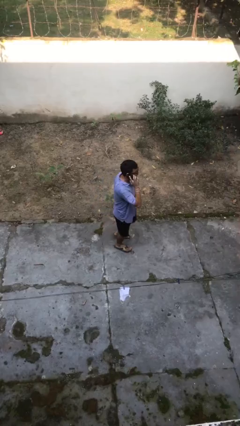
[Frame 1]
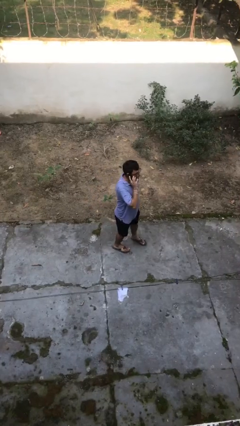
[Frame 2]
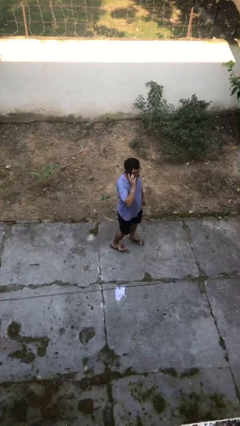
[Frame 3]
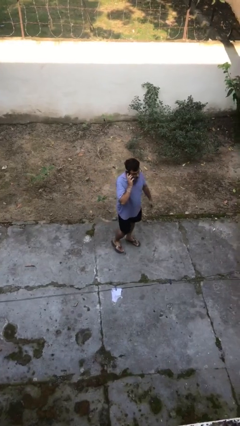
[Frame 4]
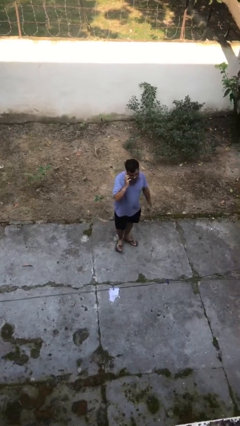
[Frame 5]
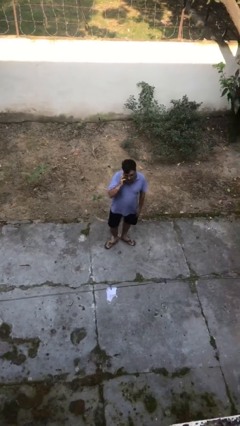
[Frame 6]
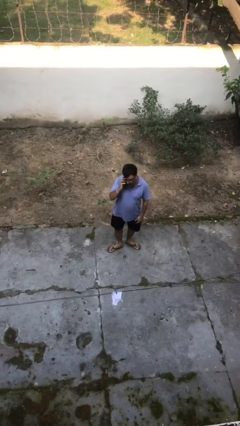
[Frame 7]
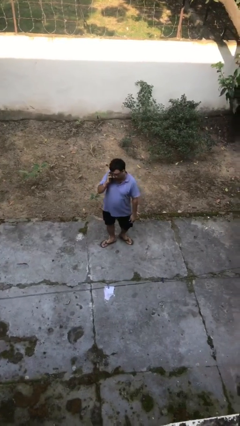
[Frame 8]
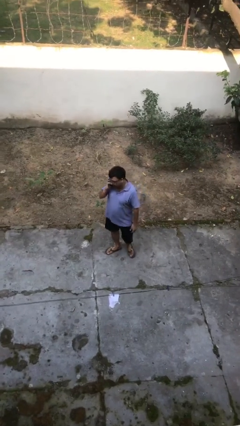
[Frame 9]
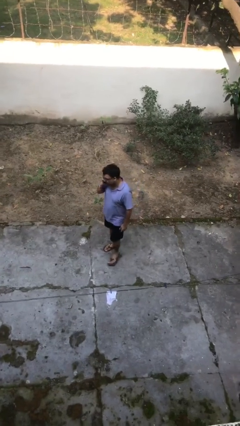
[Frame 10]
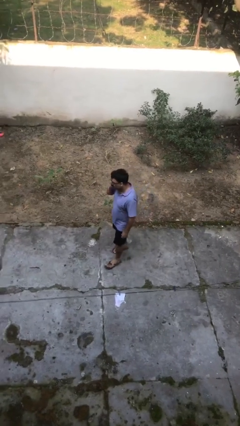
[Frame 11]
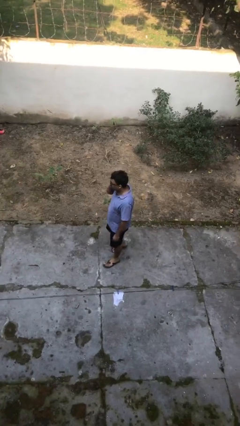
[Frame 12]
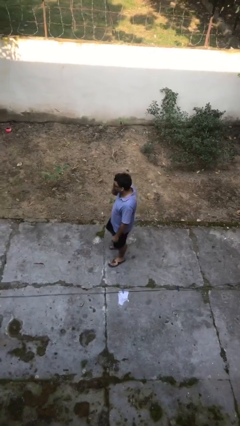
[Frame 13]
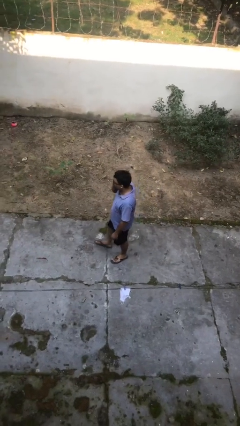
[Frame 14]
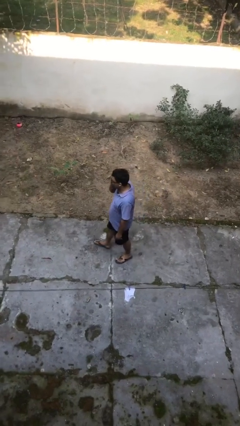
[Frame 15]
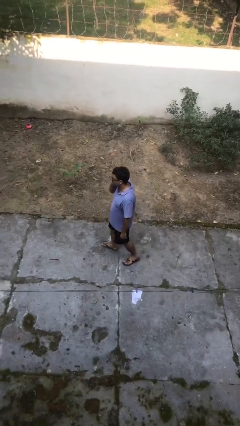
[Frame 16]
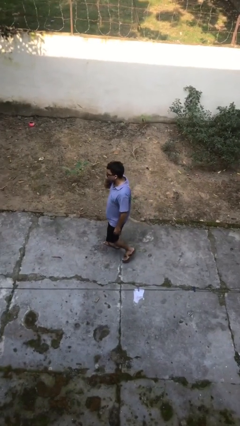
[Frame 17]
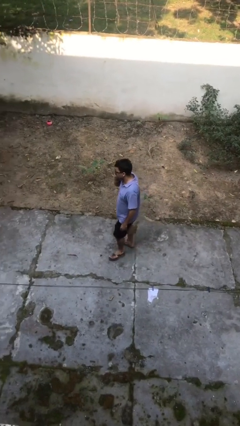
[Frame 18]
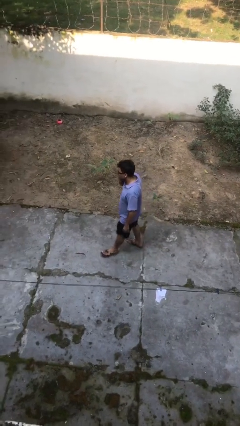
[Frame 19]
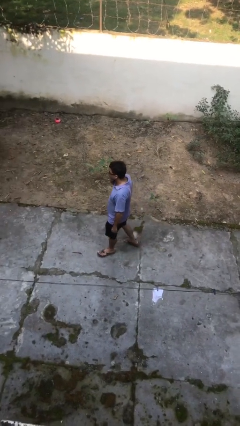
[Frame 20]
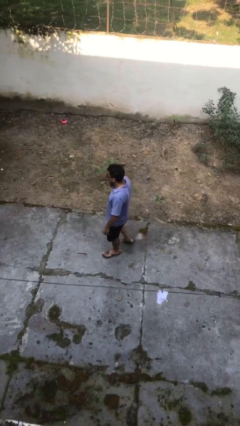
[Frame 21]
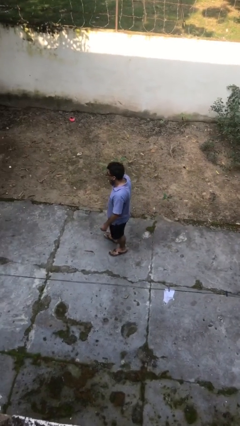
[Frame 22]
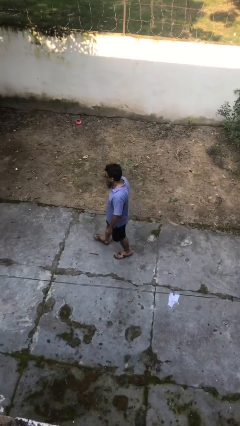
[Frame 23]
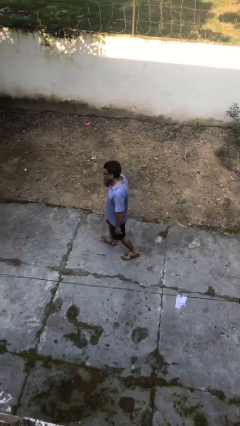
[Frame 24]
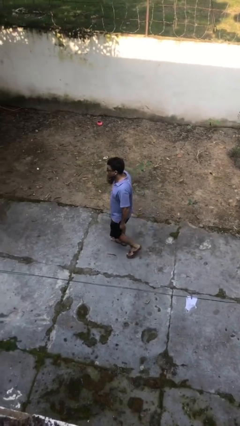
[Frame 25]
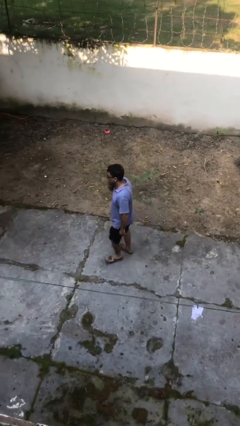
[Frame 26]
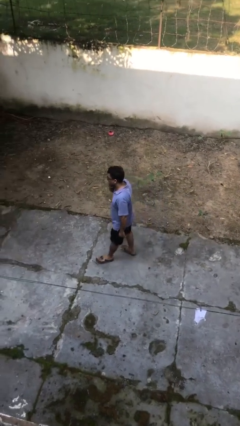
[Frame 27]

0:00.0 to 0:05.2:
person talks on phone

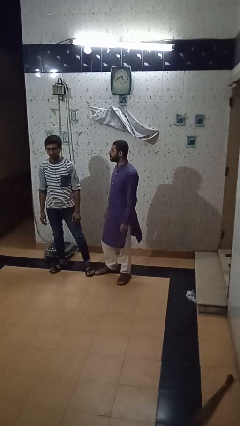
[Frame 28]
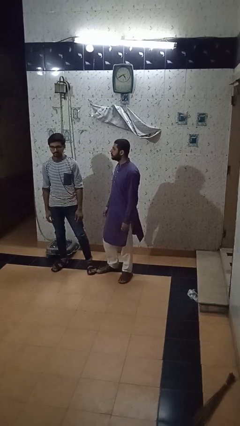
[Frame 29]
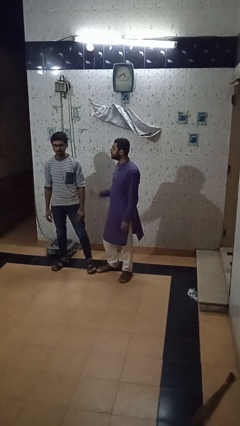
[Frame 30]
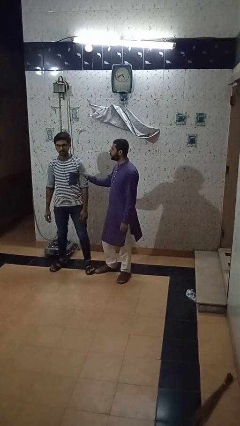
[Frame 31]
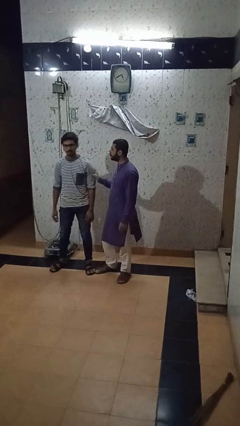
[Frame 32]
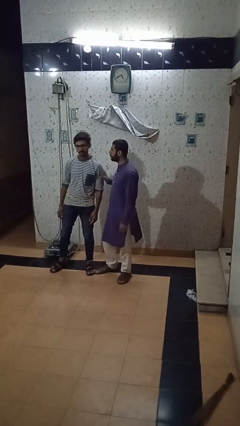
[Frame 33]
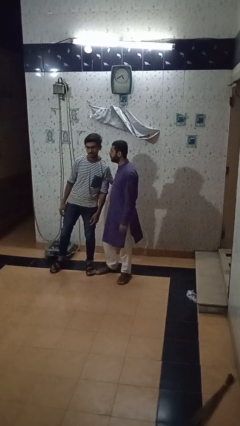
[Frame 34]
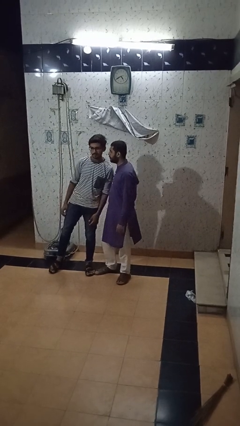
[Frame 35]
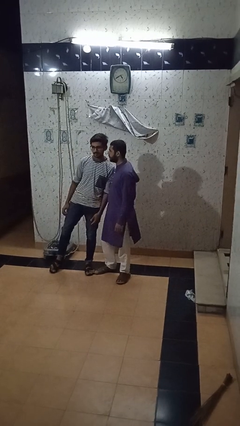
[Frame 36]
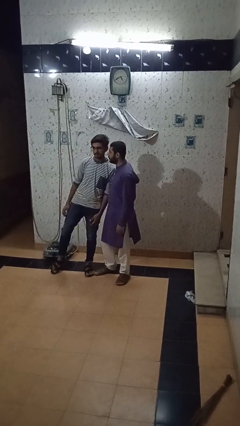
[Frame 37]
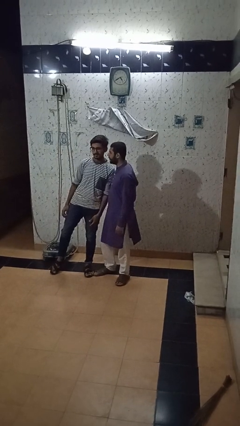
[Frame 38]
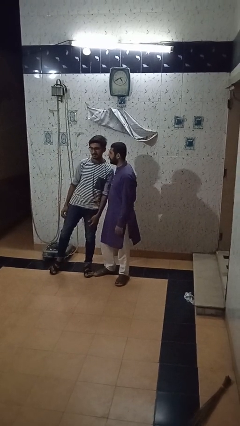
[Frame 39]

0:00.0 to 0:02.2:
person grabs person by bicep

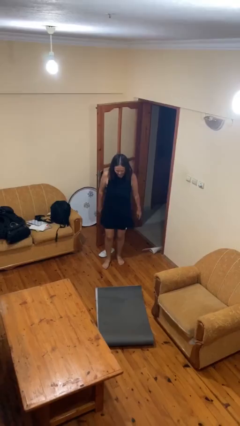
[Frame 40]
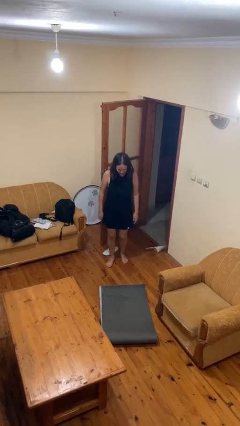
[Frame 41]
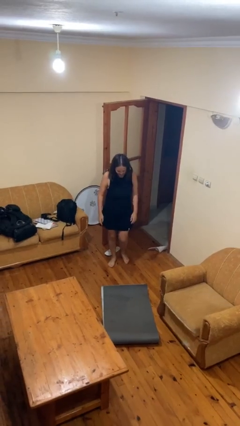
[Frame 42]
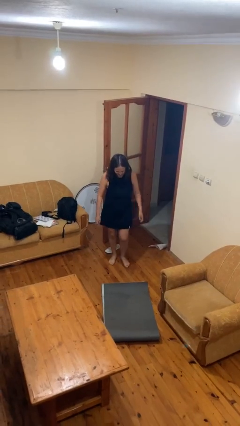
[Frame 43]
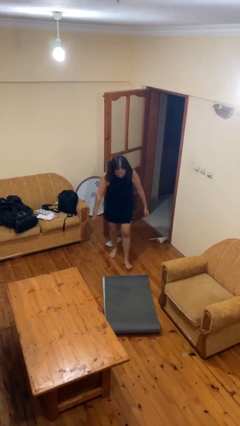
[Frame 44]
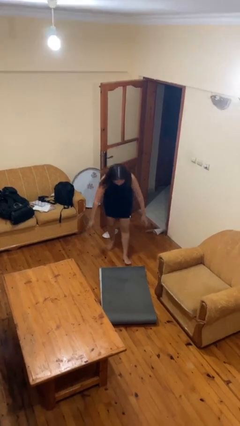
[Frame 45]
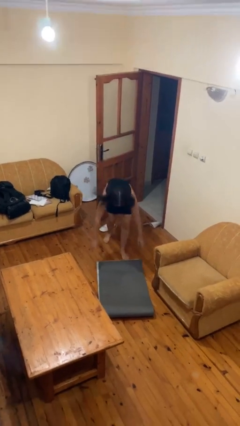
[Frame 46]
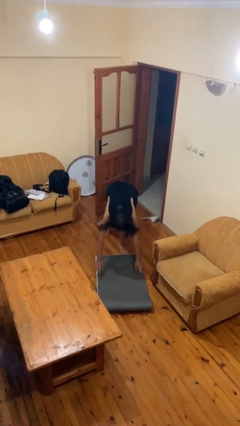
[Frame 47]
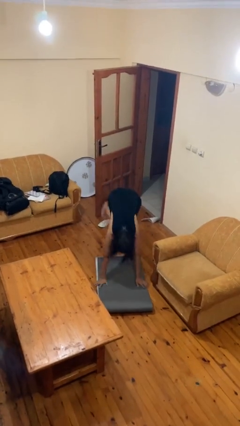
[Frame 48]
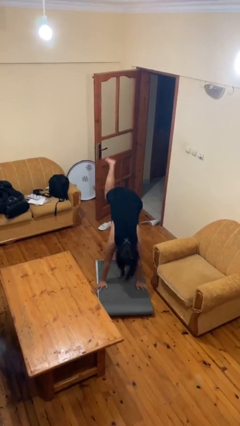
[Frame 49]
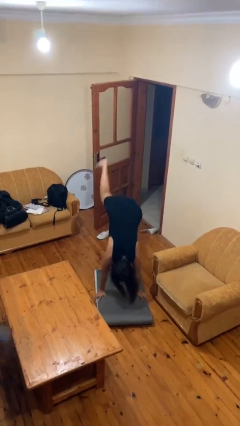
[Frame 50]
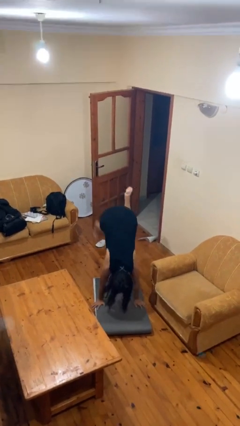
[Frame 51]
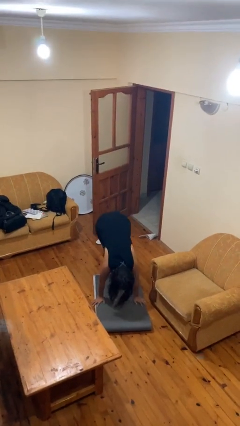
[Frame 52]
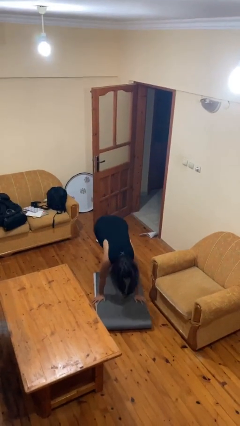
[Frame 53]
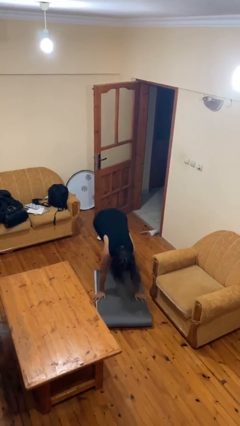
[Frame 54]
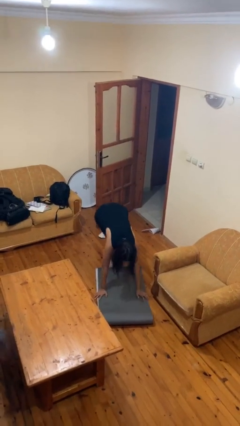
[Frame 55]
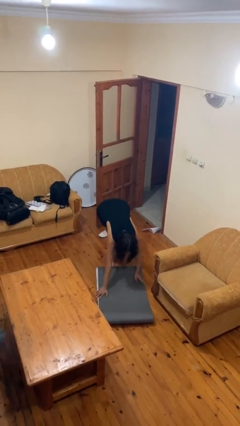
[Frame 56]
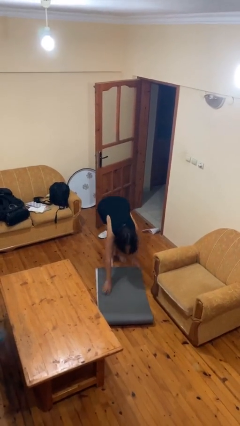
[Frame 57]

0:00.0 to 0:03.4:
person handstand

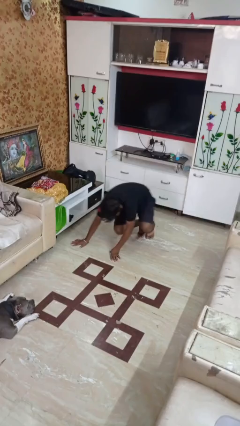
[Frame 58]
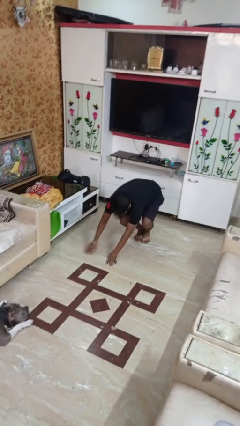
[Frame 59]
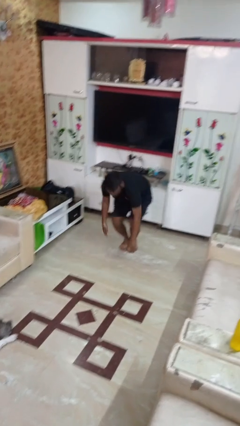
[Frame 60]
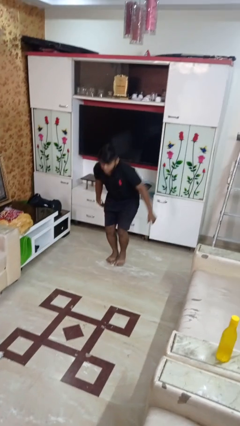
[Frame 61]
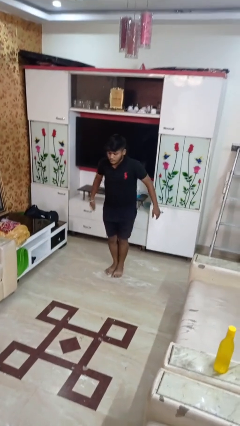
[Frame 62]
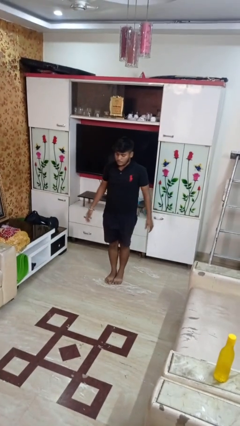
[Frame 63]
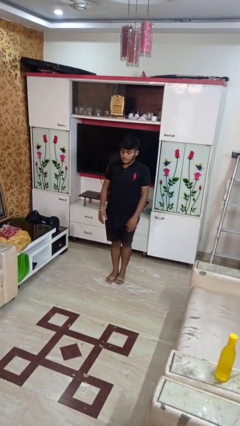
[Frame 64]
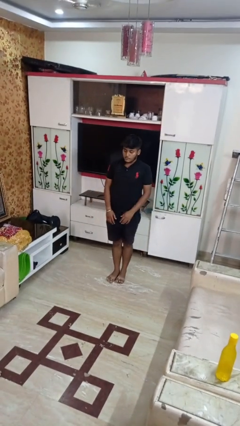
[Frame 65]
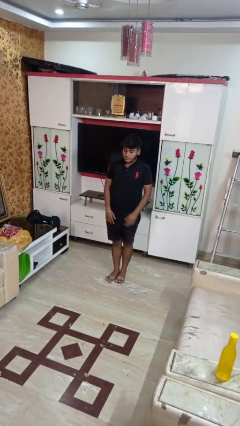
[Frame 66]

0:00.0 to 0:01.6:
person stands up from floor

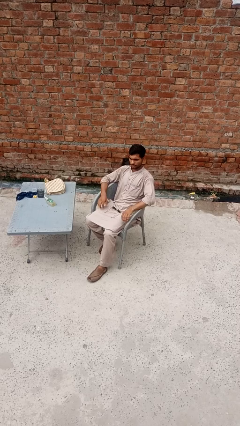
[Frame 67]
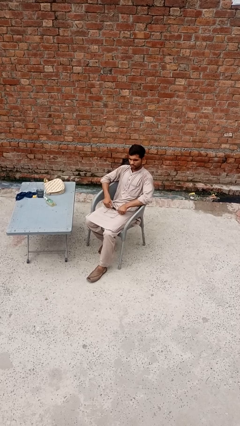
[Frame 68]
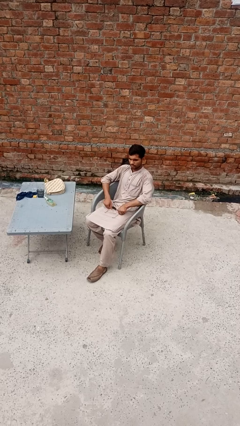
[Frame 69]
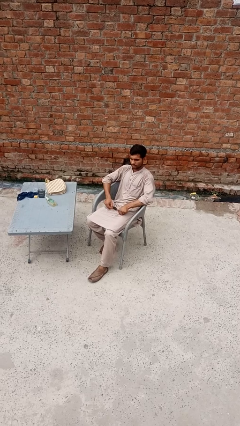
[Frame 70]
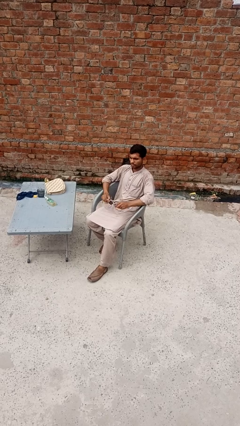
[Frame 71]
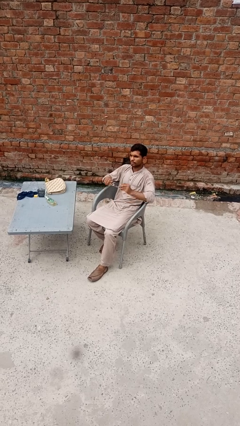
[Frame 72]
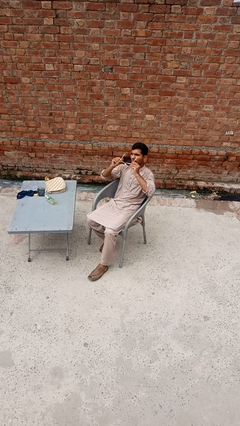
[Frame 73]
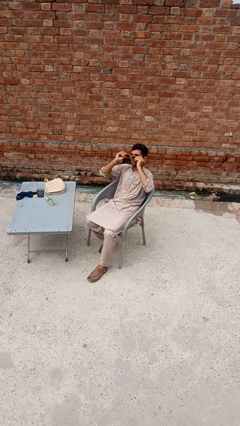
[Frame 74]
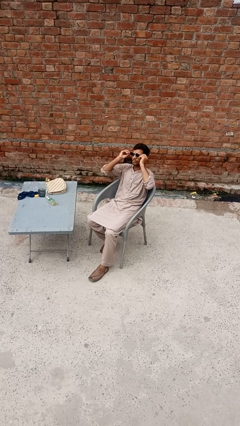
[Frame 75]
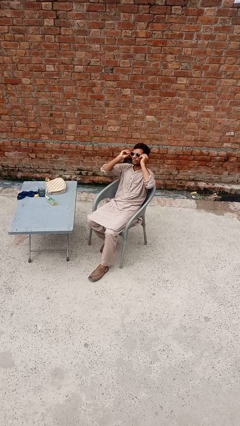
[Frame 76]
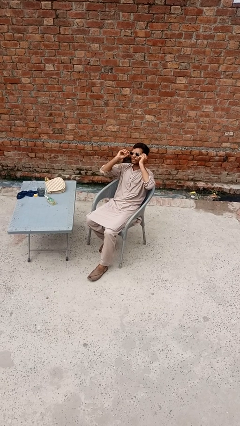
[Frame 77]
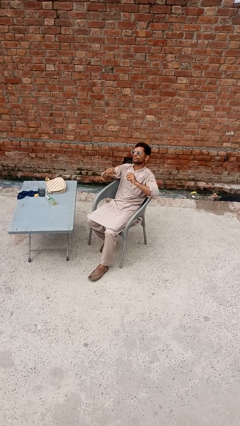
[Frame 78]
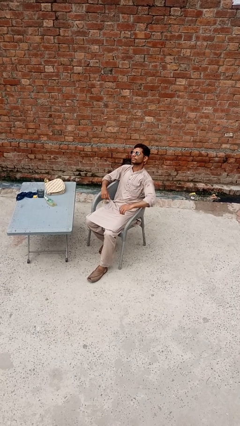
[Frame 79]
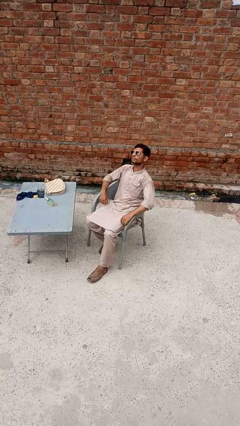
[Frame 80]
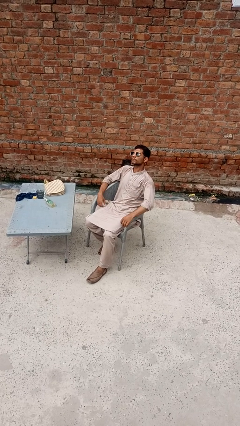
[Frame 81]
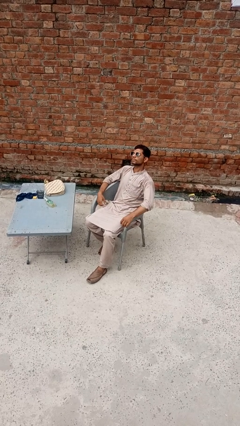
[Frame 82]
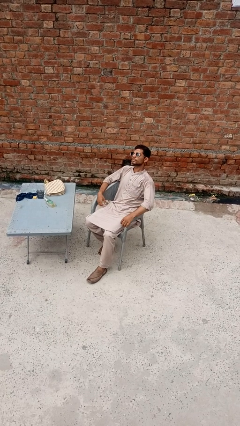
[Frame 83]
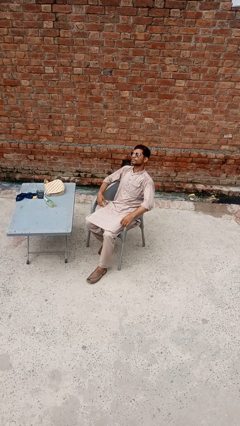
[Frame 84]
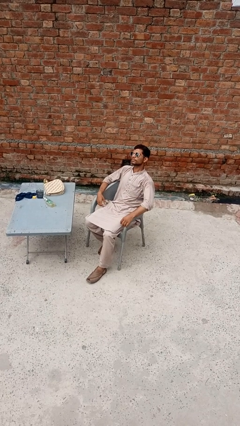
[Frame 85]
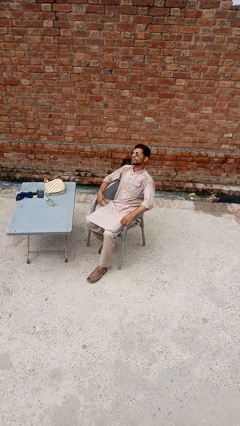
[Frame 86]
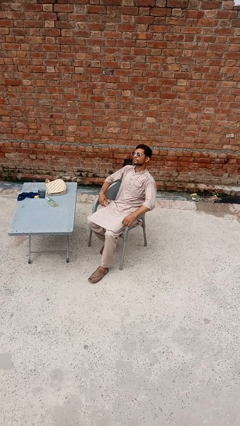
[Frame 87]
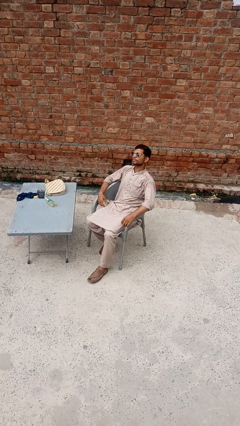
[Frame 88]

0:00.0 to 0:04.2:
person puts on sunglasses

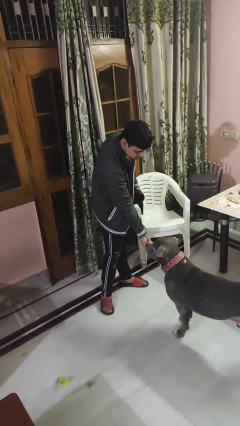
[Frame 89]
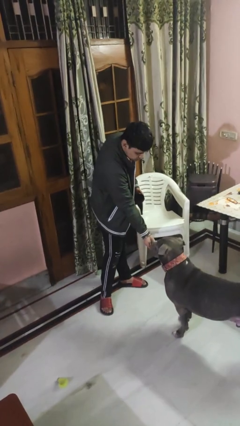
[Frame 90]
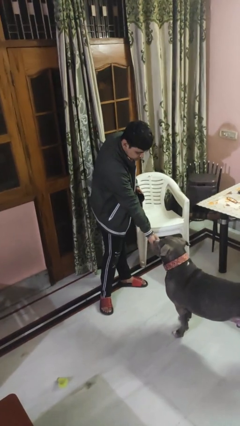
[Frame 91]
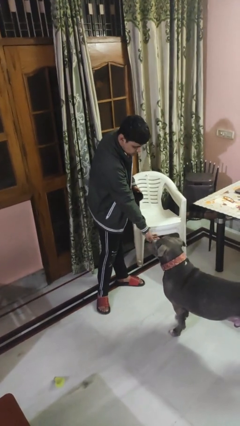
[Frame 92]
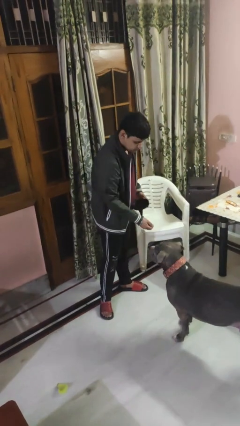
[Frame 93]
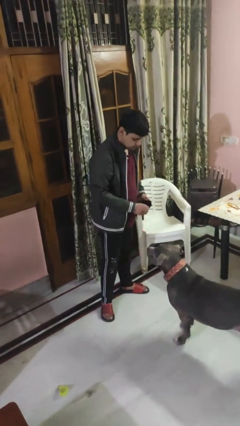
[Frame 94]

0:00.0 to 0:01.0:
person feeds dog
